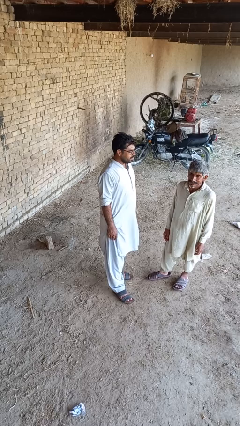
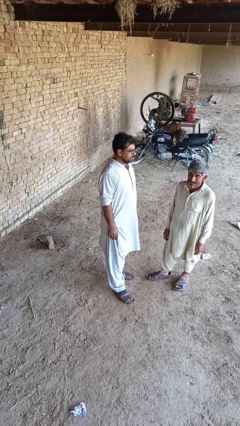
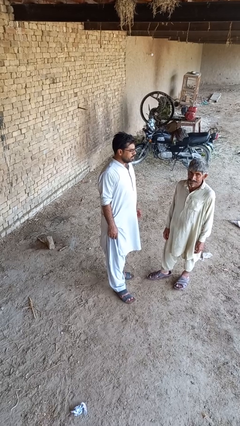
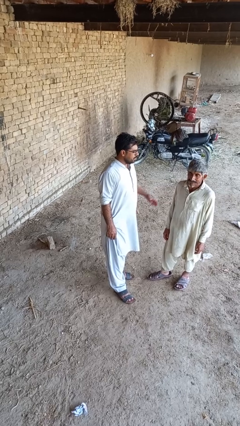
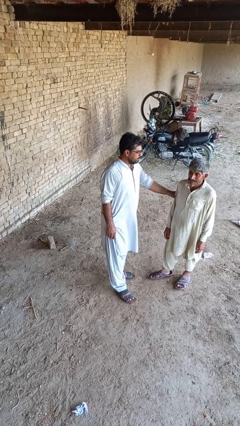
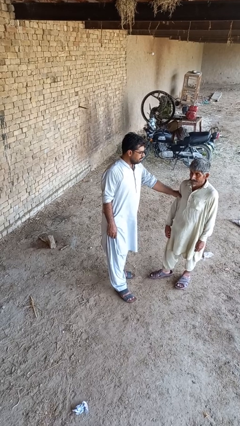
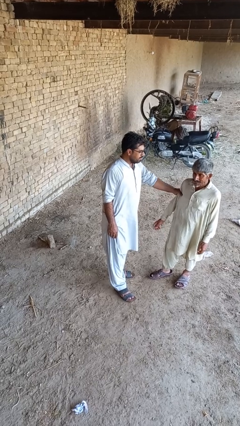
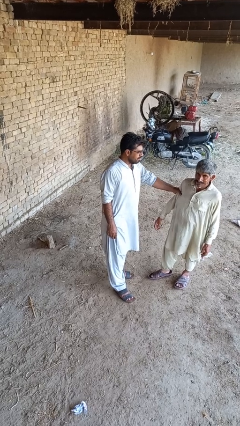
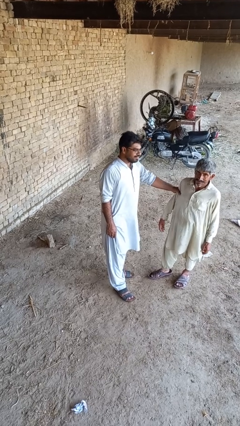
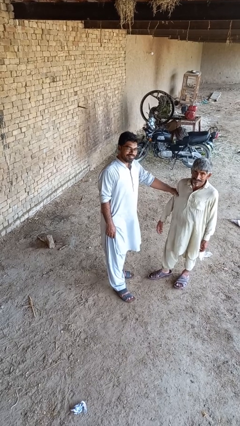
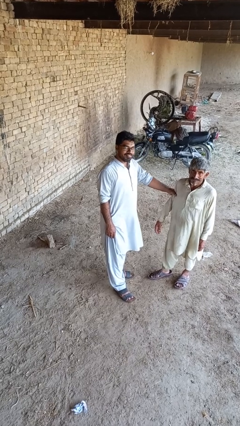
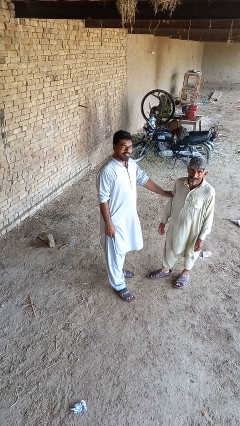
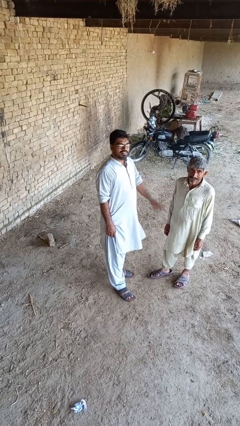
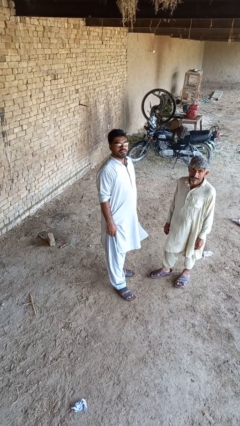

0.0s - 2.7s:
person grabs person by bicep

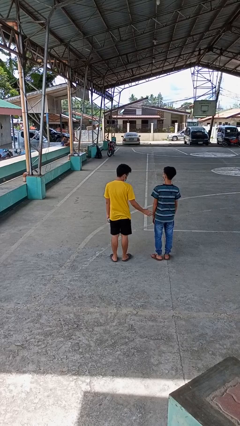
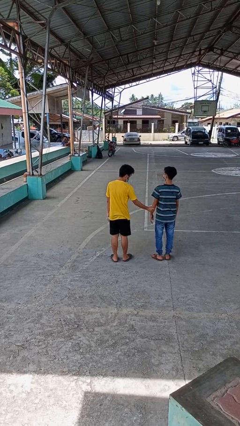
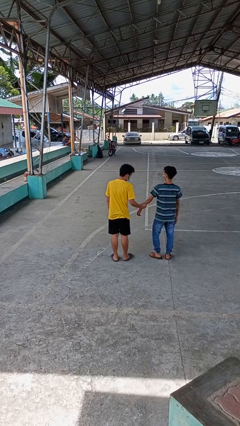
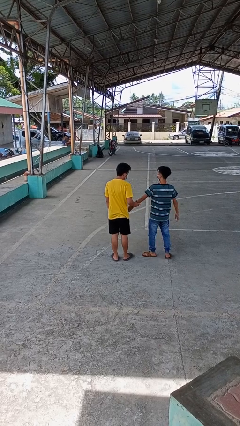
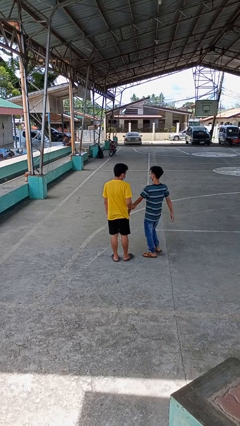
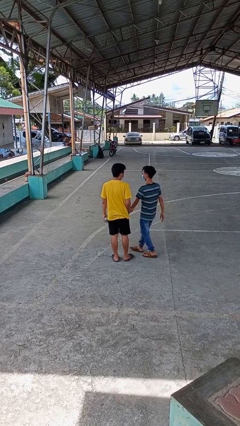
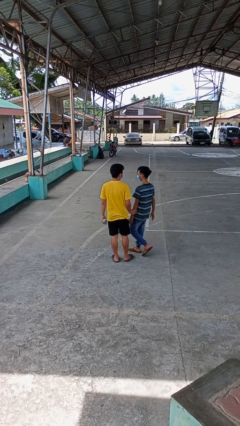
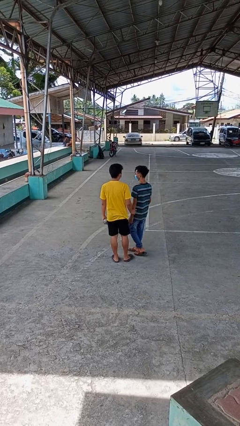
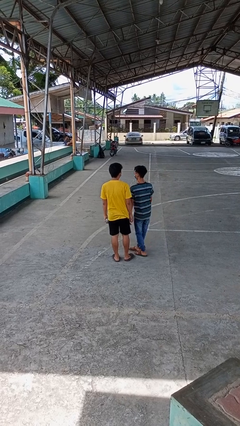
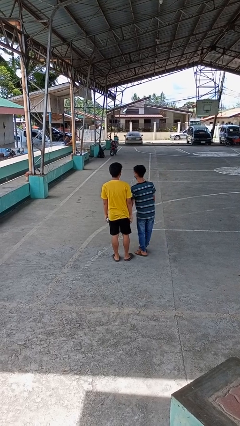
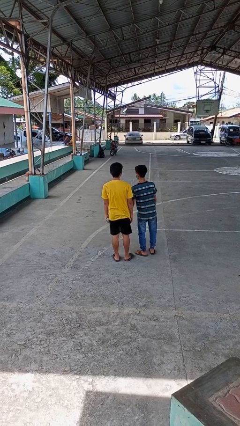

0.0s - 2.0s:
person grabs person by forearm

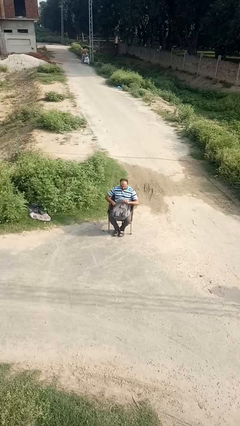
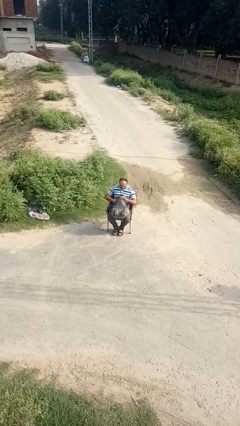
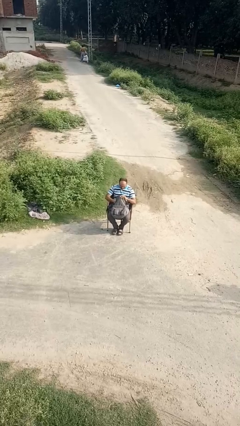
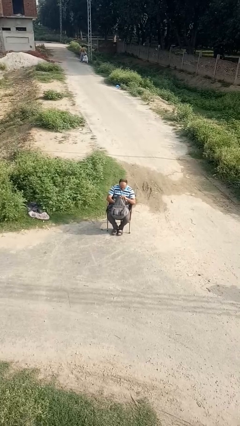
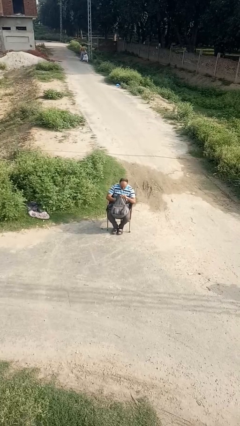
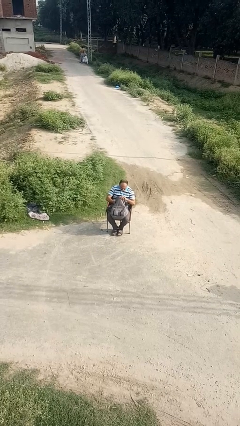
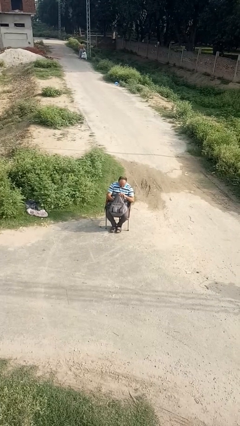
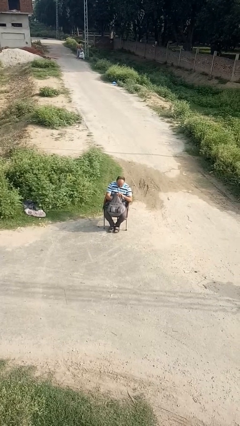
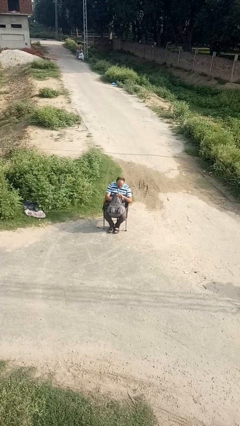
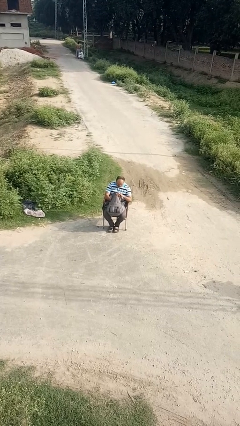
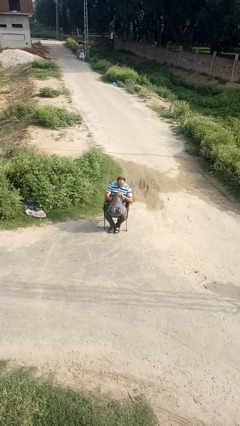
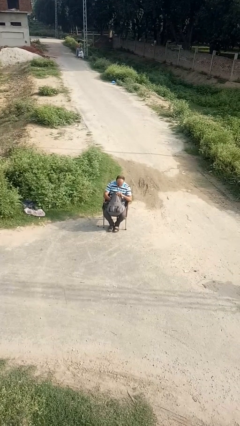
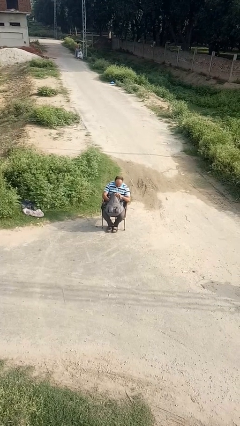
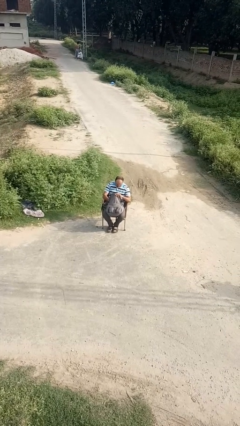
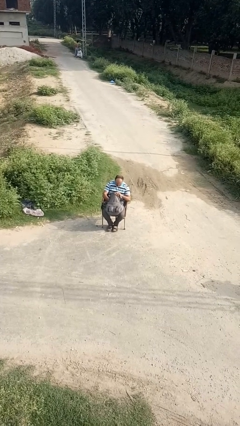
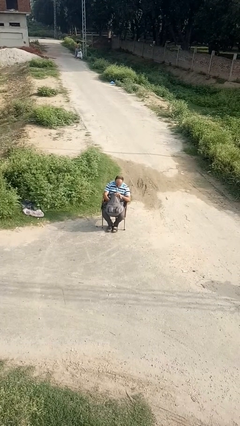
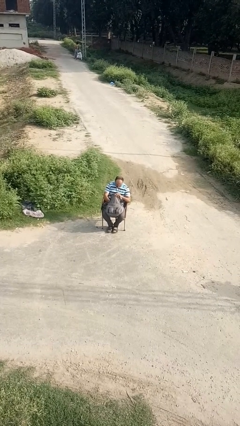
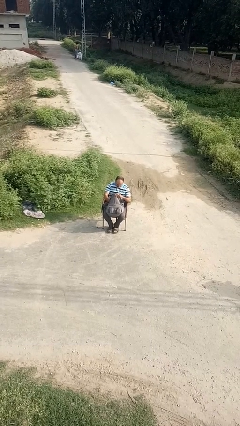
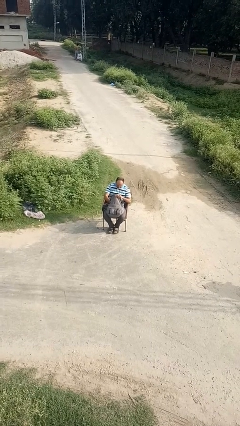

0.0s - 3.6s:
person searches in backpack

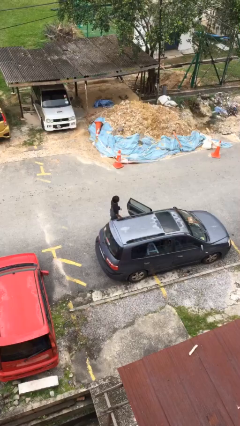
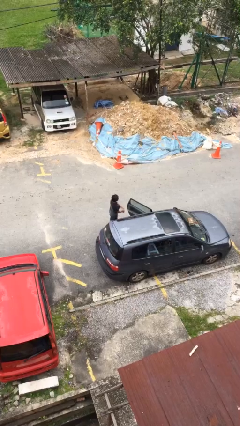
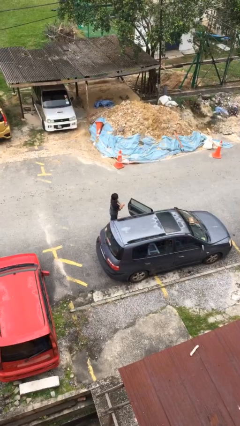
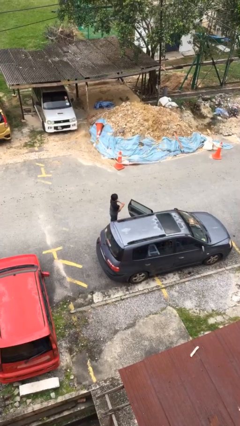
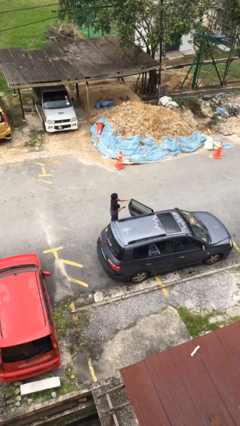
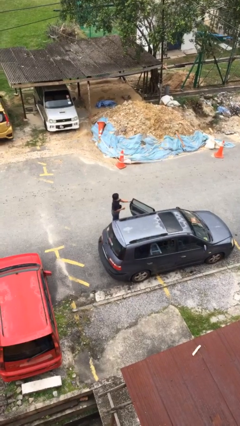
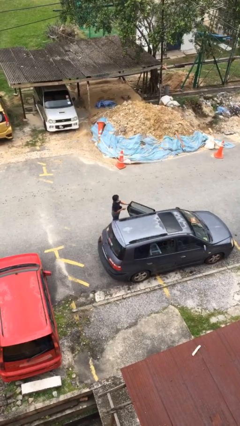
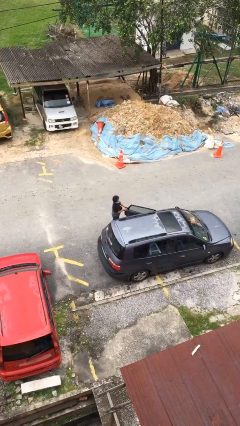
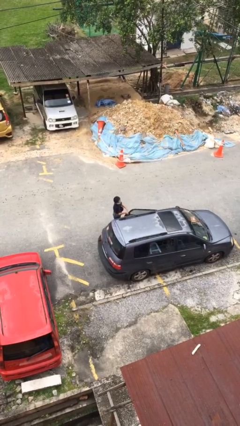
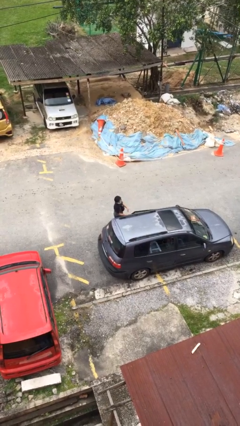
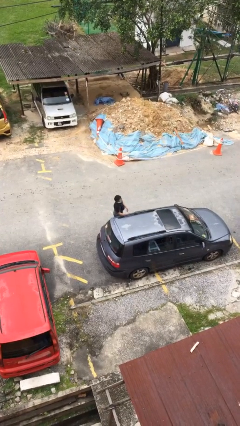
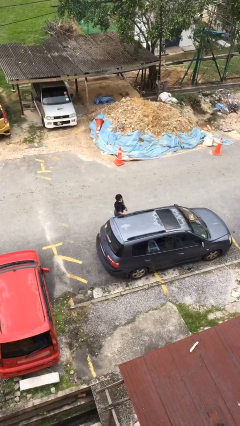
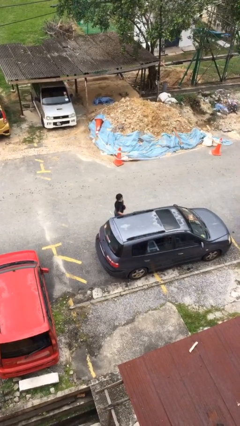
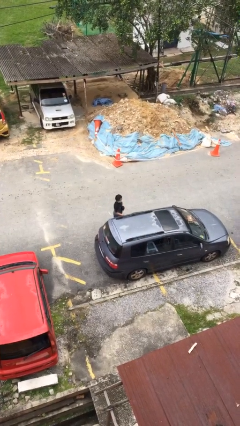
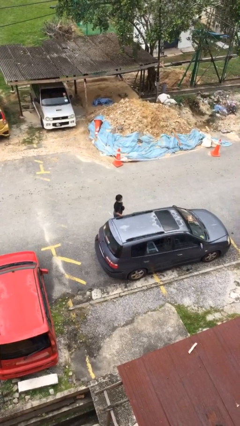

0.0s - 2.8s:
person closes car door

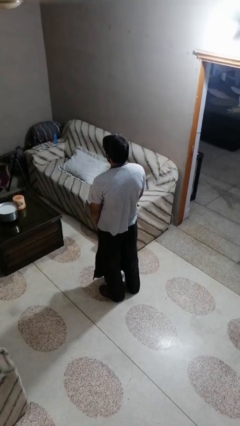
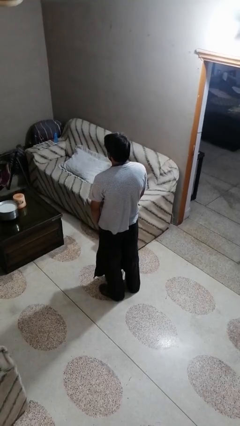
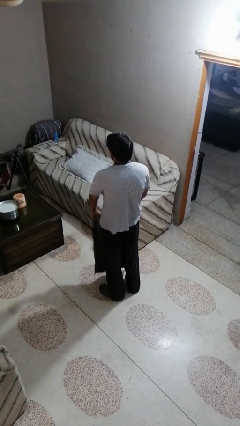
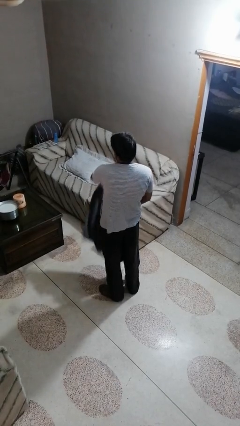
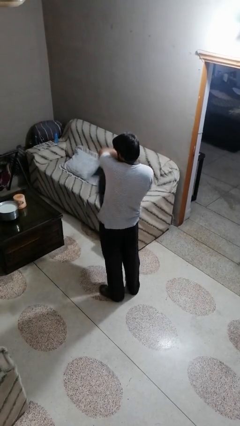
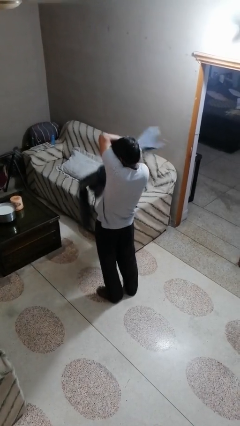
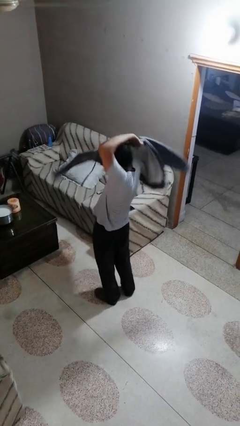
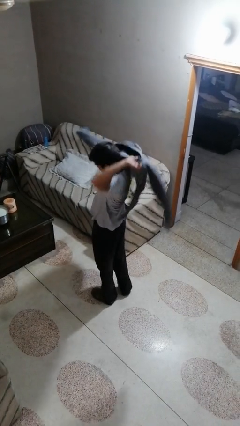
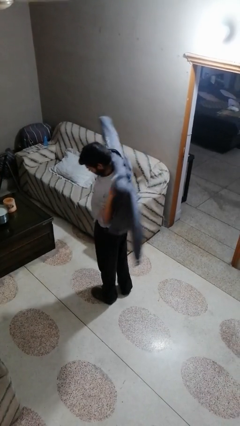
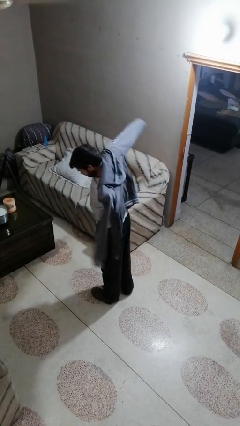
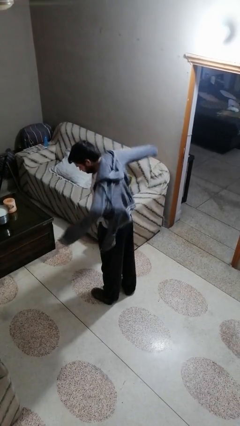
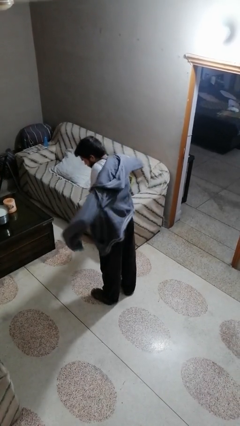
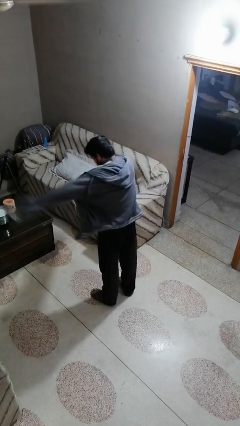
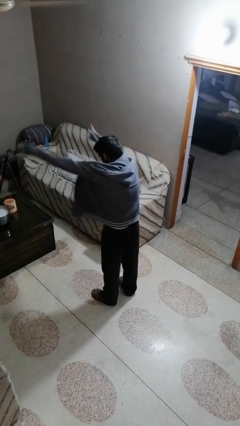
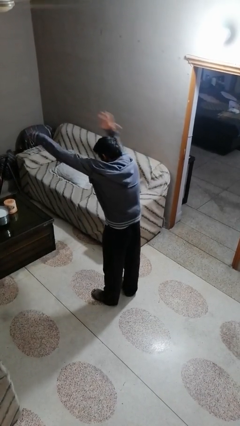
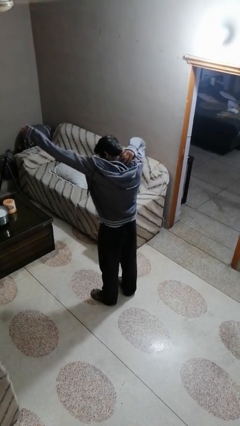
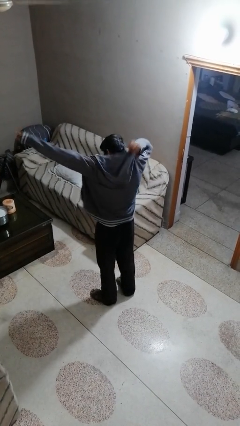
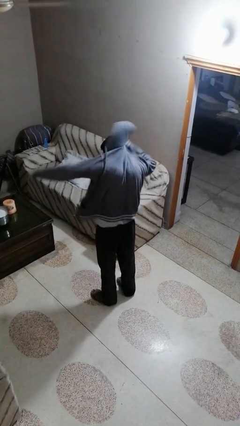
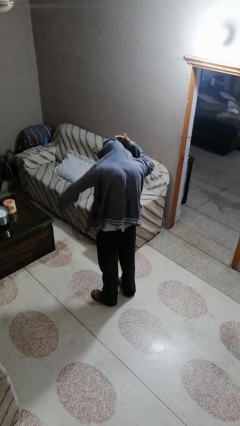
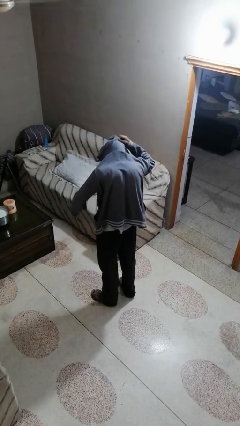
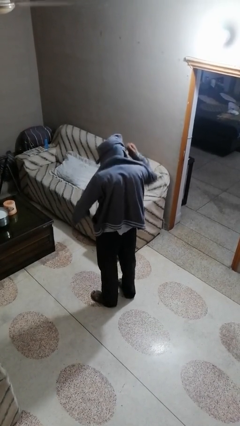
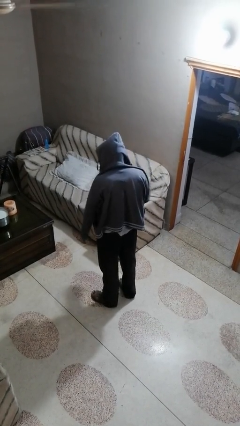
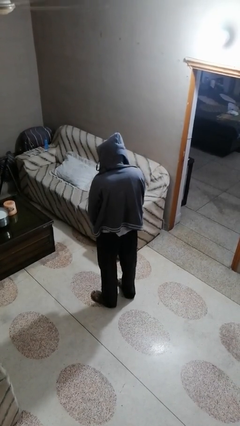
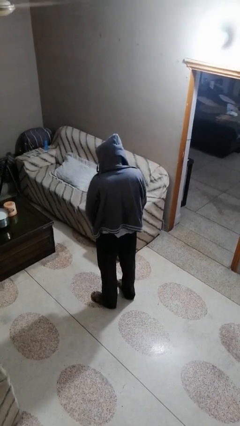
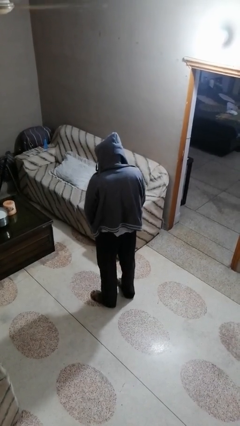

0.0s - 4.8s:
person puts on hoodie

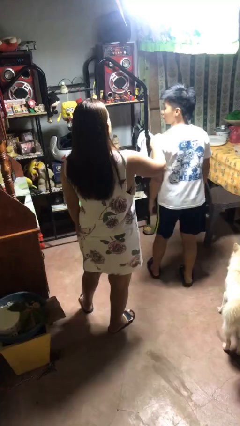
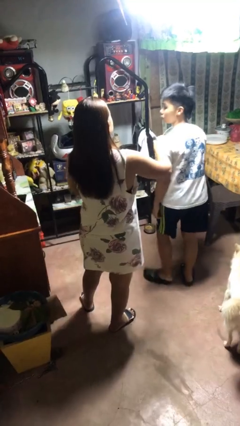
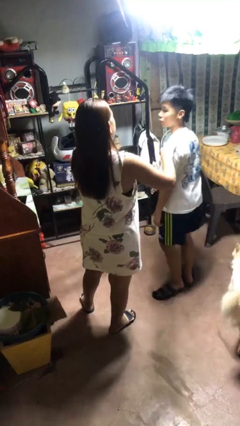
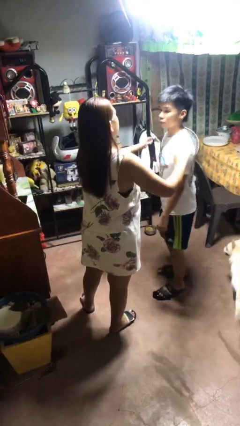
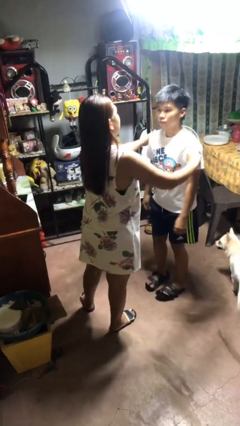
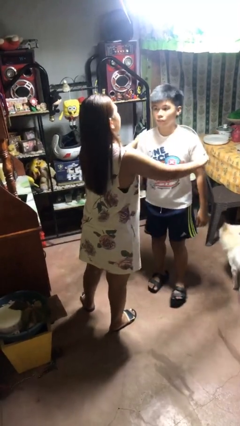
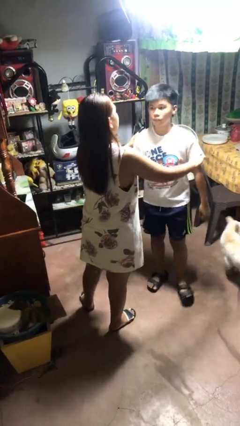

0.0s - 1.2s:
person spins person around

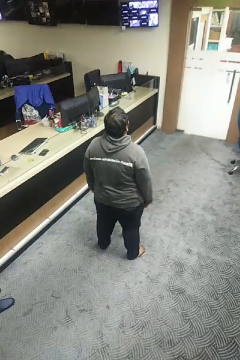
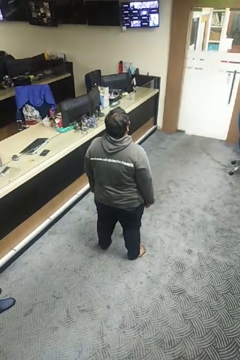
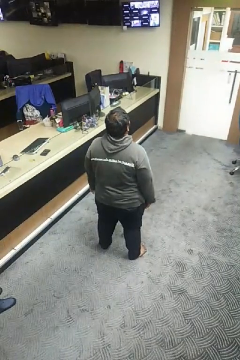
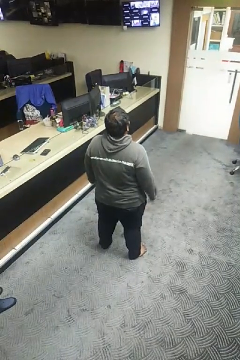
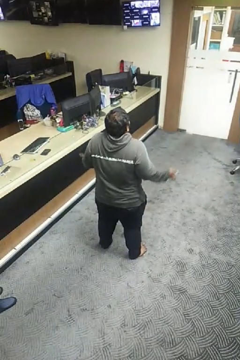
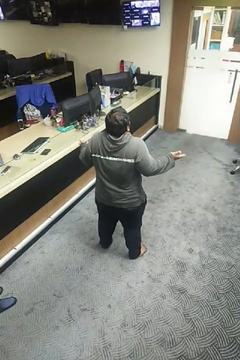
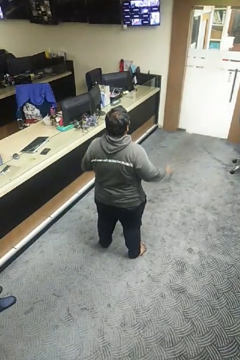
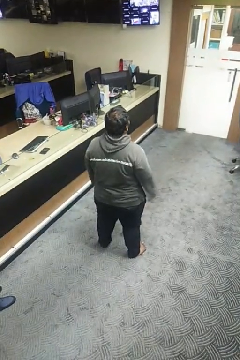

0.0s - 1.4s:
person shrugs
